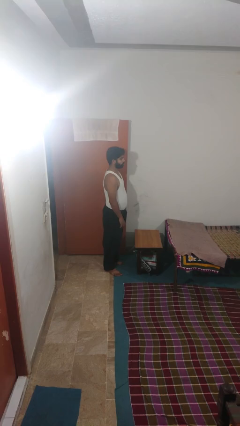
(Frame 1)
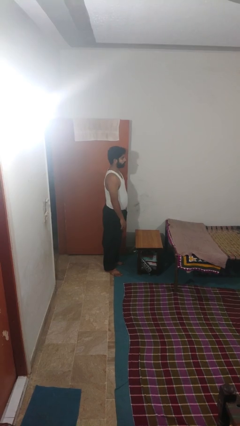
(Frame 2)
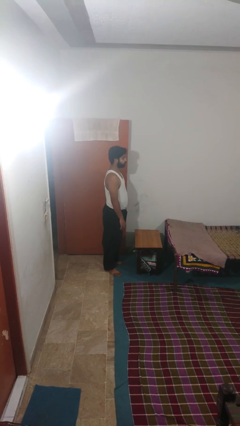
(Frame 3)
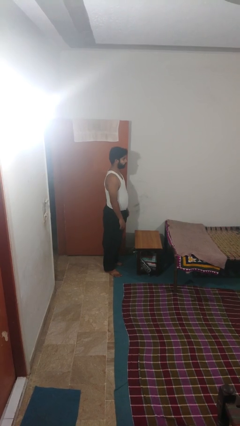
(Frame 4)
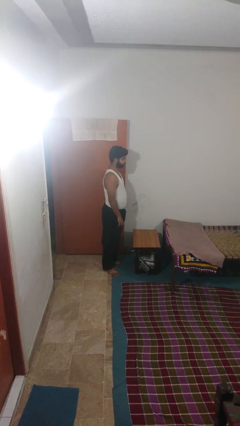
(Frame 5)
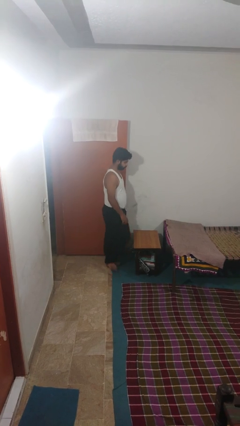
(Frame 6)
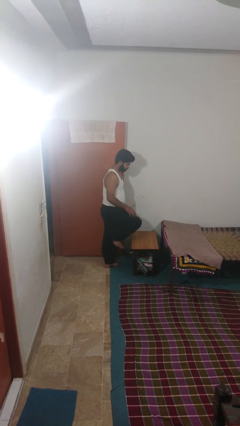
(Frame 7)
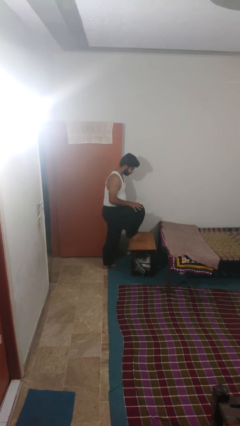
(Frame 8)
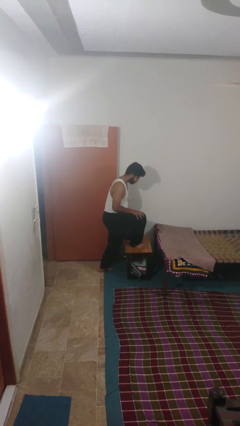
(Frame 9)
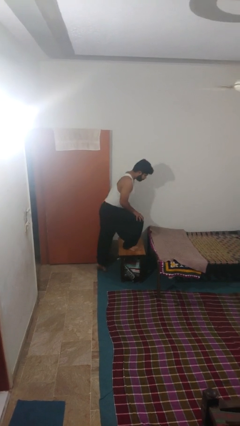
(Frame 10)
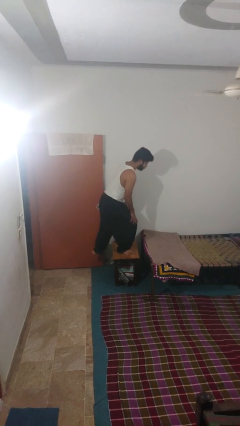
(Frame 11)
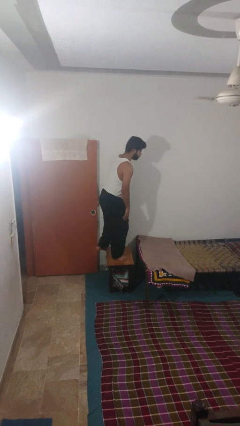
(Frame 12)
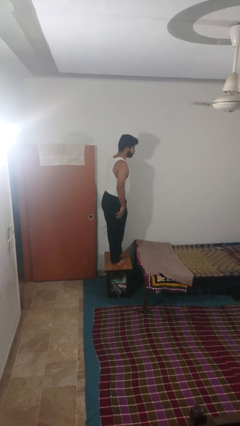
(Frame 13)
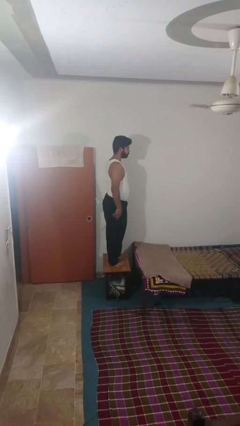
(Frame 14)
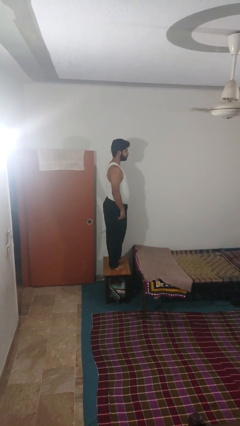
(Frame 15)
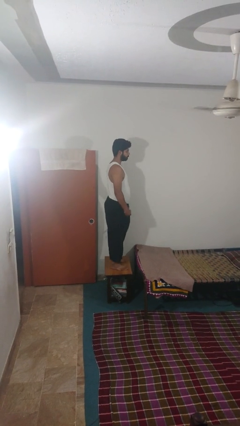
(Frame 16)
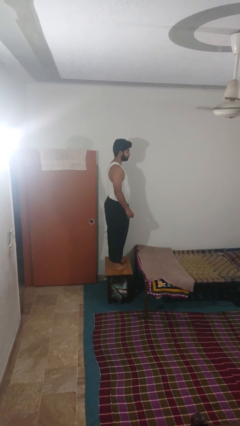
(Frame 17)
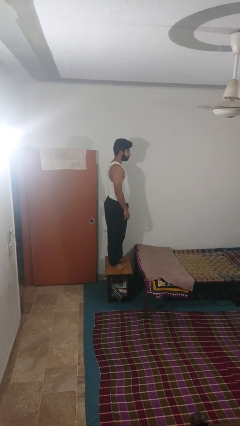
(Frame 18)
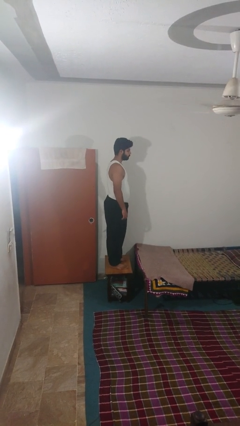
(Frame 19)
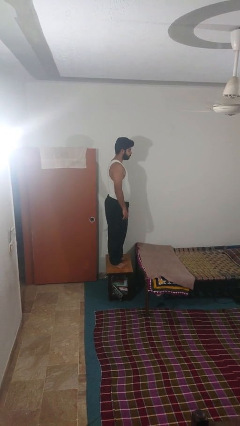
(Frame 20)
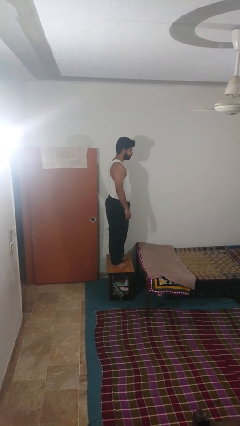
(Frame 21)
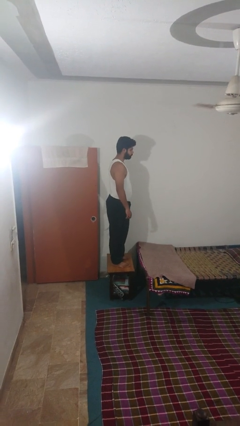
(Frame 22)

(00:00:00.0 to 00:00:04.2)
person climbs on table

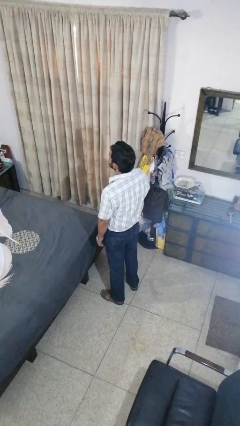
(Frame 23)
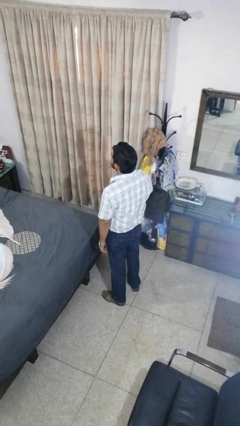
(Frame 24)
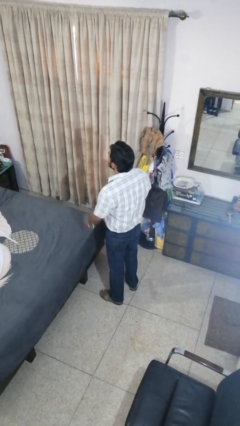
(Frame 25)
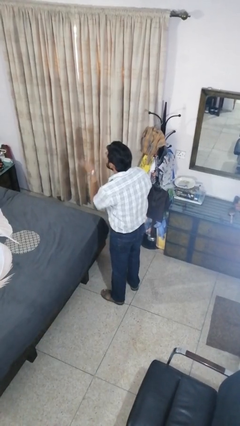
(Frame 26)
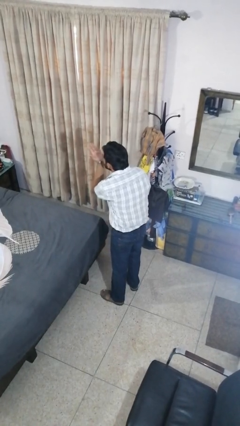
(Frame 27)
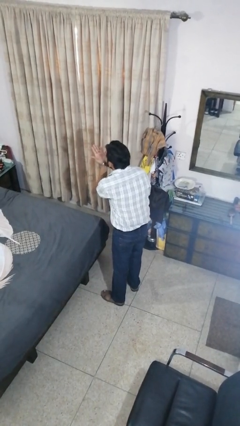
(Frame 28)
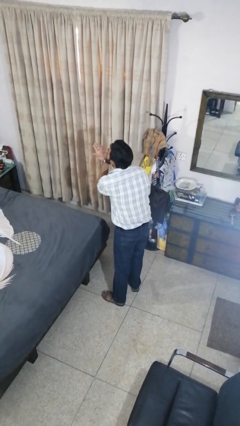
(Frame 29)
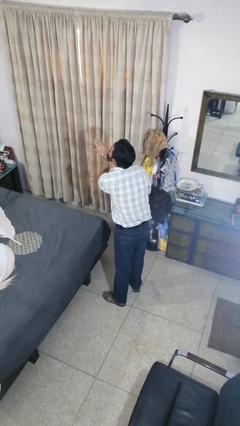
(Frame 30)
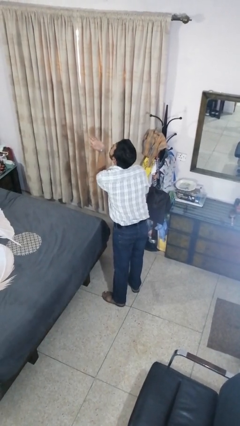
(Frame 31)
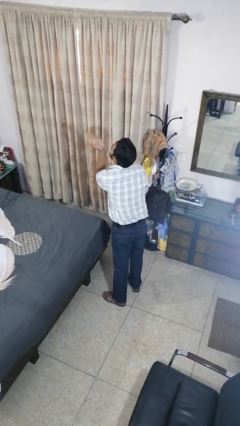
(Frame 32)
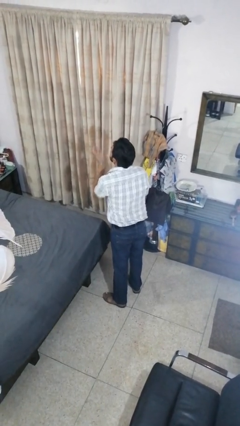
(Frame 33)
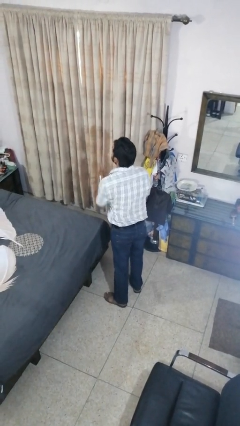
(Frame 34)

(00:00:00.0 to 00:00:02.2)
person gestures blow kiss

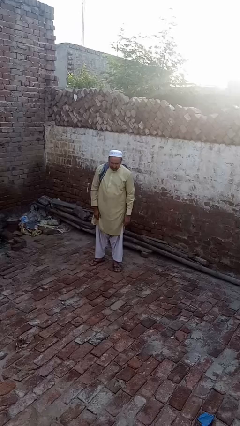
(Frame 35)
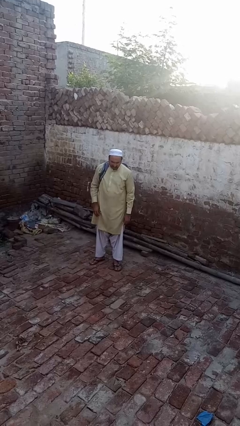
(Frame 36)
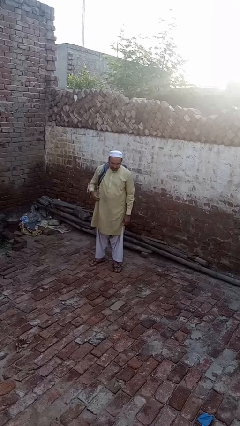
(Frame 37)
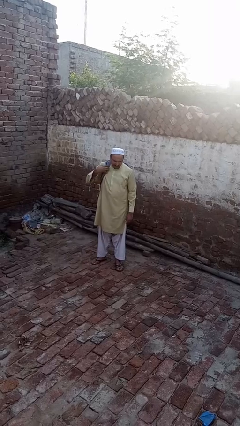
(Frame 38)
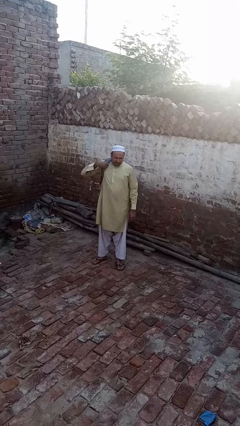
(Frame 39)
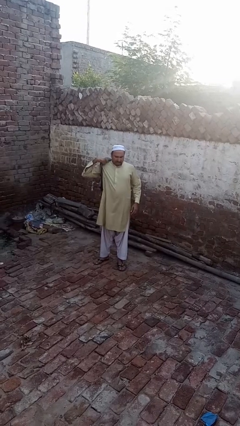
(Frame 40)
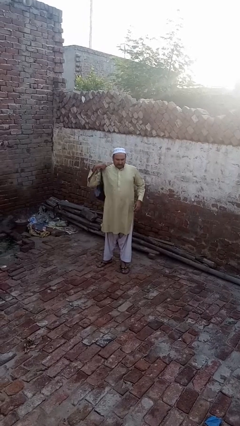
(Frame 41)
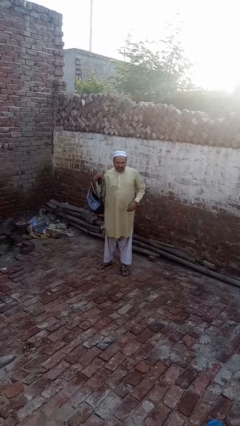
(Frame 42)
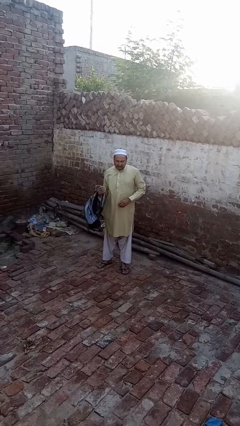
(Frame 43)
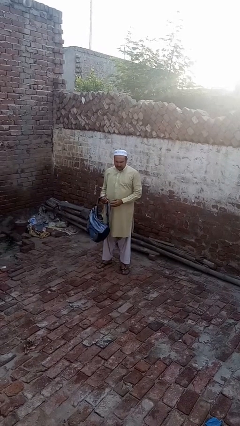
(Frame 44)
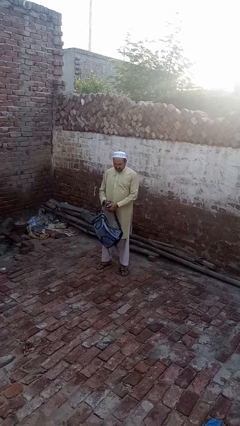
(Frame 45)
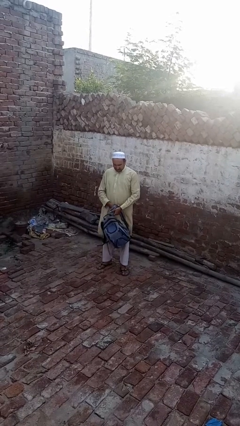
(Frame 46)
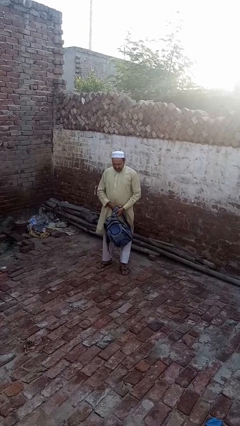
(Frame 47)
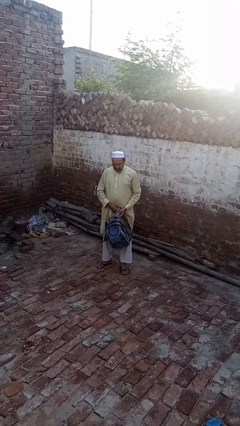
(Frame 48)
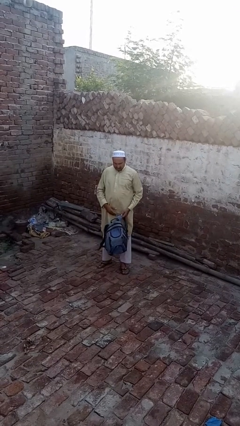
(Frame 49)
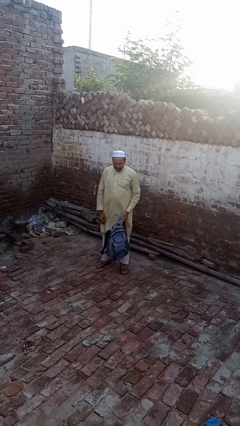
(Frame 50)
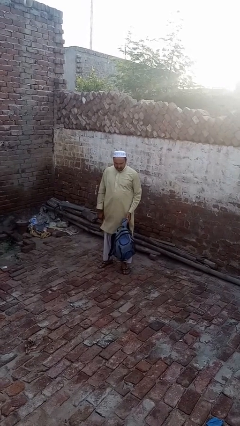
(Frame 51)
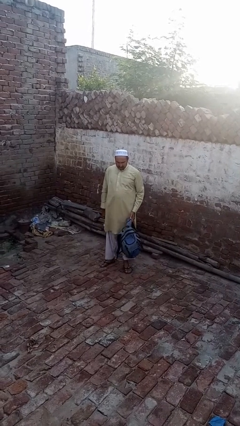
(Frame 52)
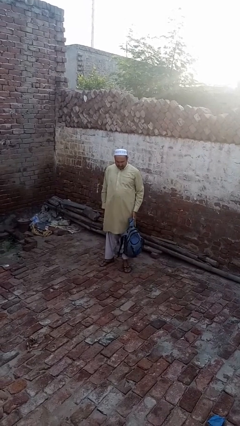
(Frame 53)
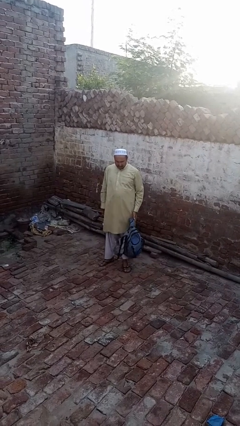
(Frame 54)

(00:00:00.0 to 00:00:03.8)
person takes off backpack

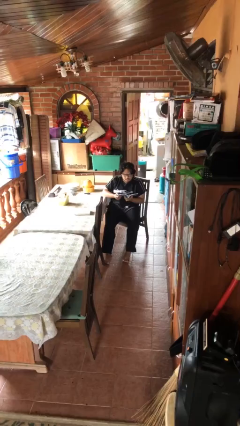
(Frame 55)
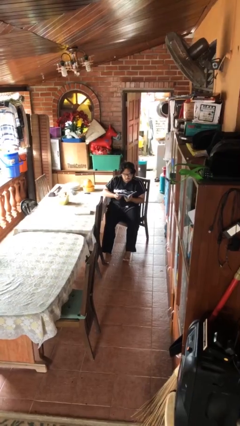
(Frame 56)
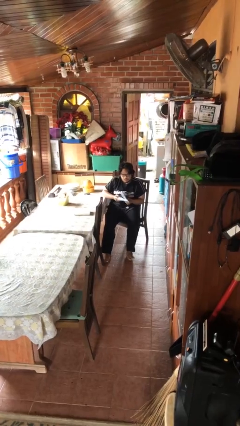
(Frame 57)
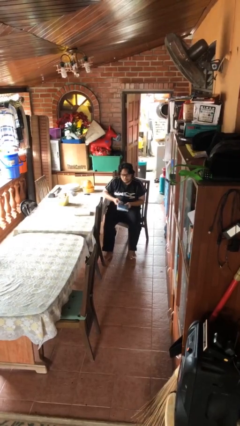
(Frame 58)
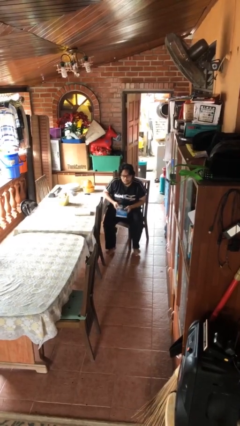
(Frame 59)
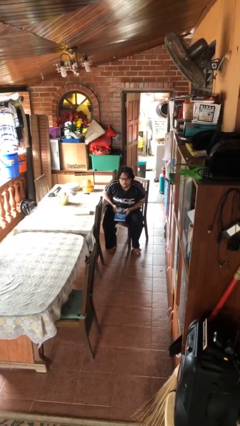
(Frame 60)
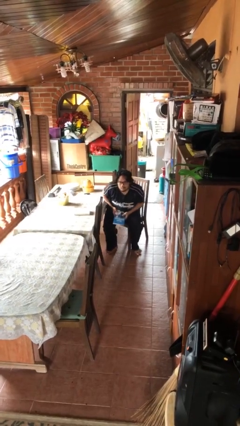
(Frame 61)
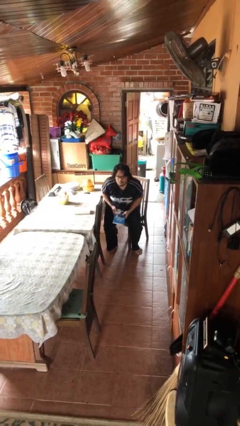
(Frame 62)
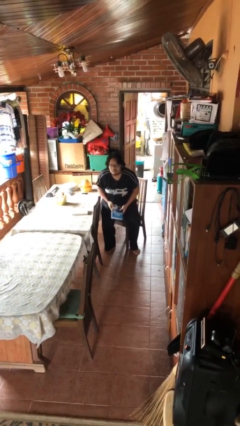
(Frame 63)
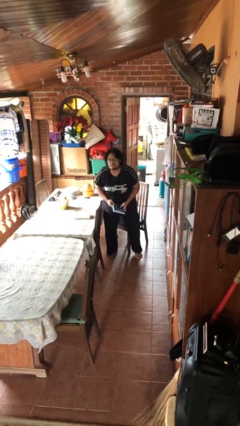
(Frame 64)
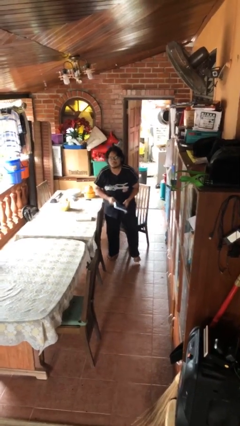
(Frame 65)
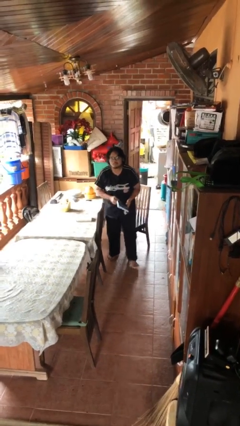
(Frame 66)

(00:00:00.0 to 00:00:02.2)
person stands up

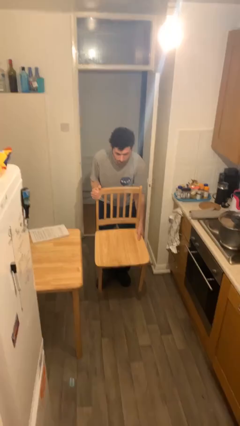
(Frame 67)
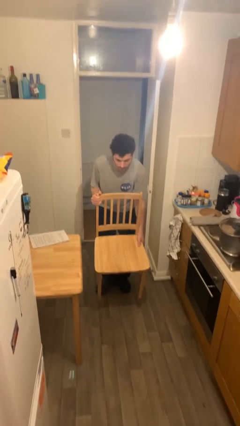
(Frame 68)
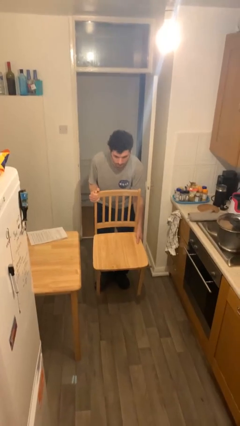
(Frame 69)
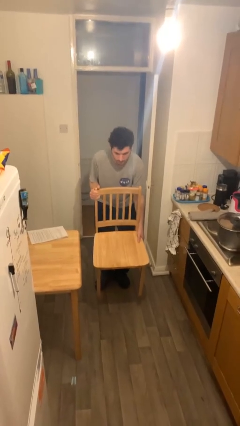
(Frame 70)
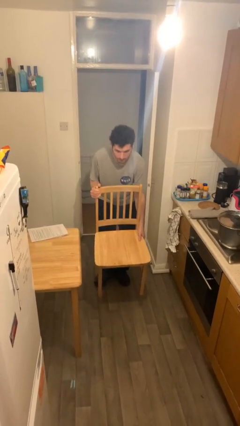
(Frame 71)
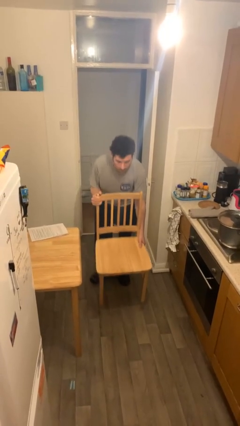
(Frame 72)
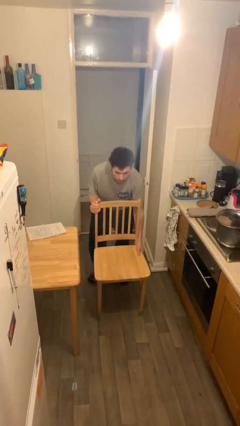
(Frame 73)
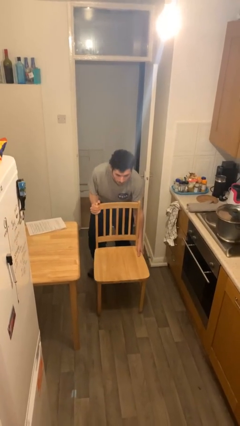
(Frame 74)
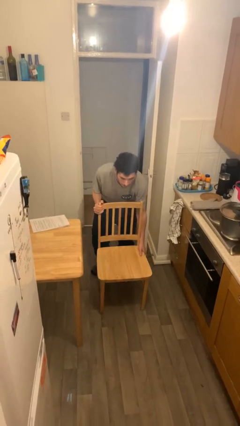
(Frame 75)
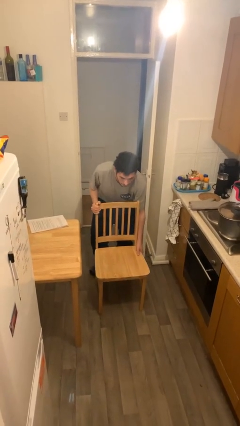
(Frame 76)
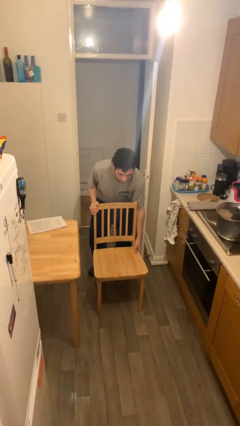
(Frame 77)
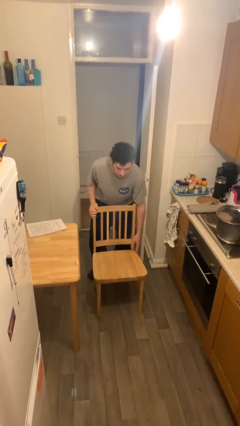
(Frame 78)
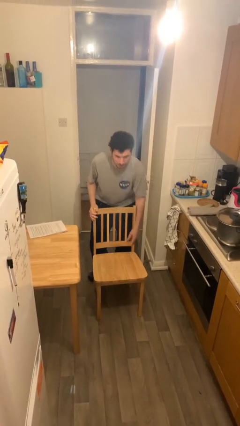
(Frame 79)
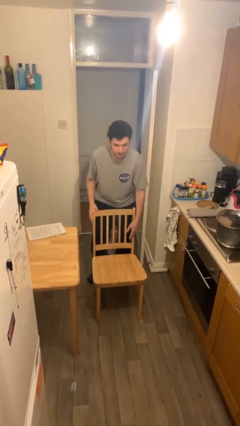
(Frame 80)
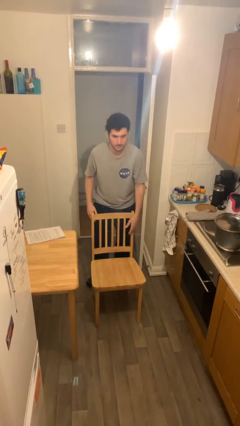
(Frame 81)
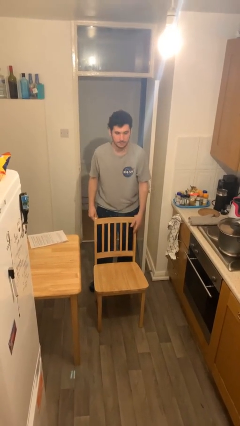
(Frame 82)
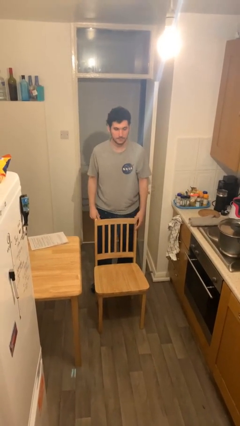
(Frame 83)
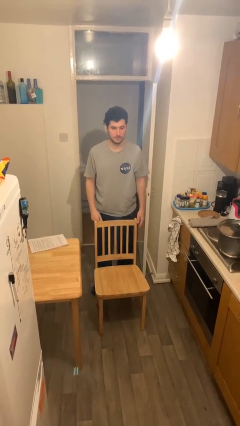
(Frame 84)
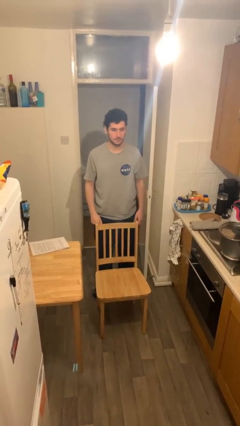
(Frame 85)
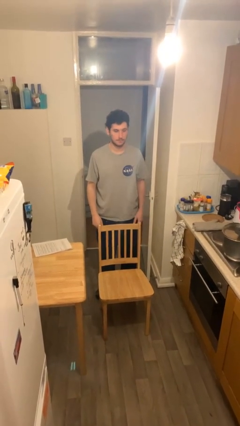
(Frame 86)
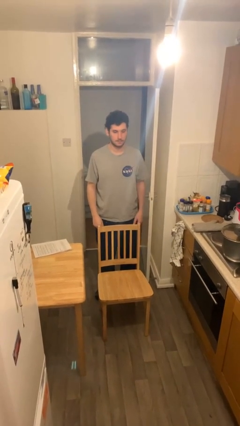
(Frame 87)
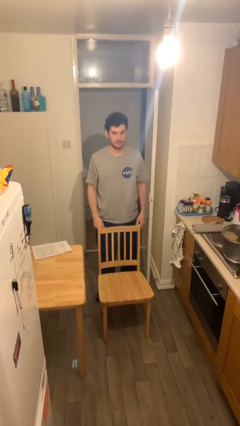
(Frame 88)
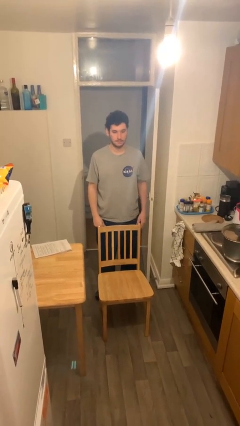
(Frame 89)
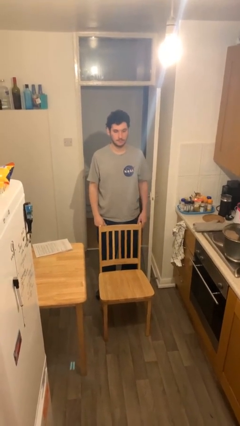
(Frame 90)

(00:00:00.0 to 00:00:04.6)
person puts down object on floor

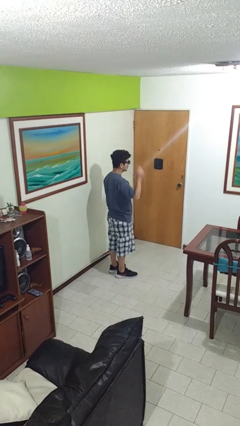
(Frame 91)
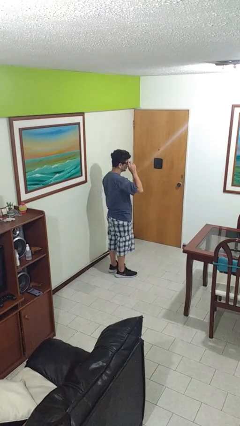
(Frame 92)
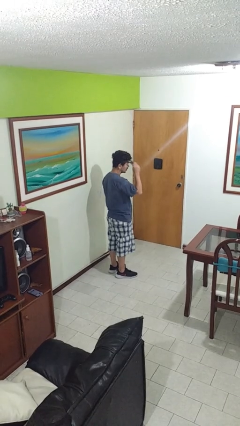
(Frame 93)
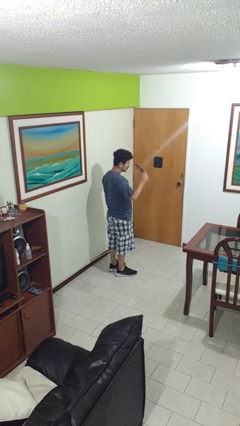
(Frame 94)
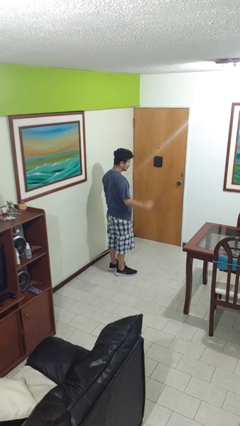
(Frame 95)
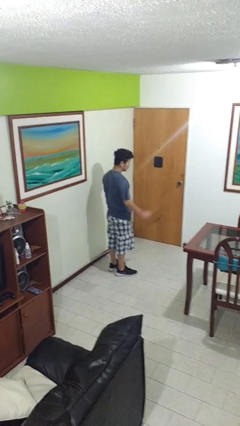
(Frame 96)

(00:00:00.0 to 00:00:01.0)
person takes off sunglasses
